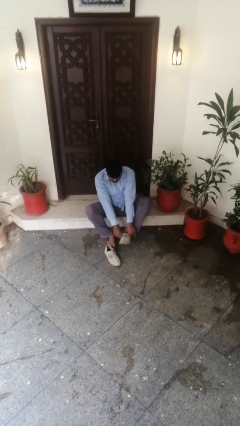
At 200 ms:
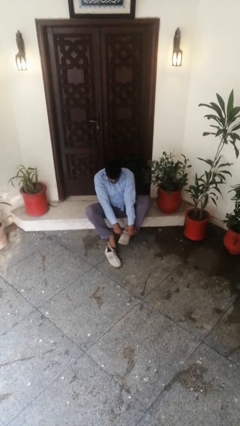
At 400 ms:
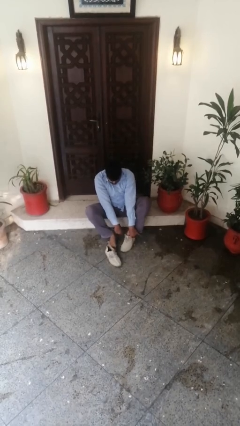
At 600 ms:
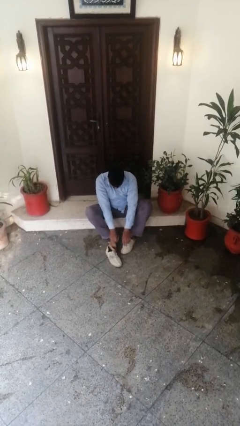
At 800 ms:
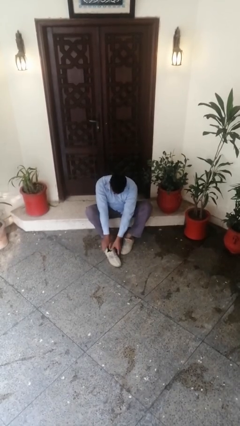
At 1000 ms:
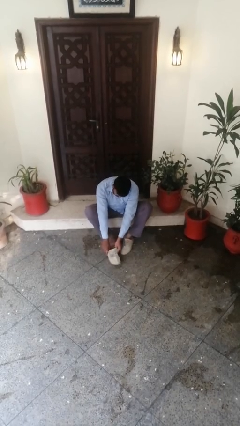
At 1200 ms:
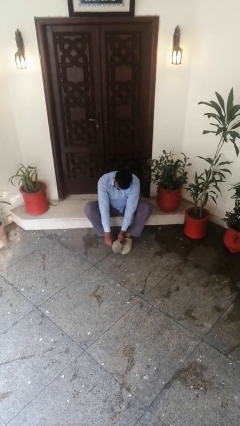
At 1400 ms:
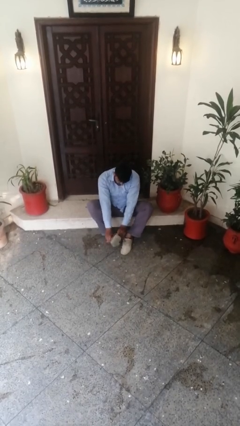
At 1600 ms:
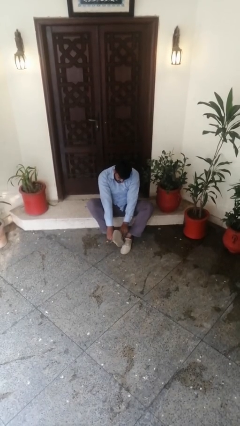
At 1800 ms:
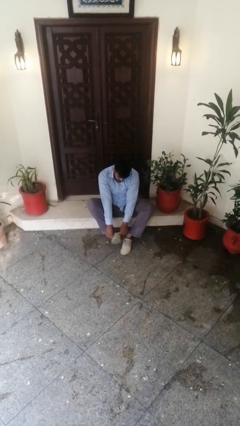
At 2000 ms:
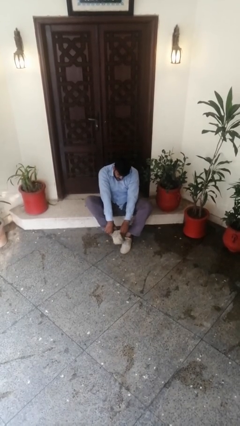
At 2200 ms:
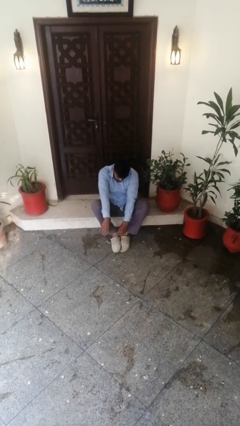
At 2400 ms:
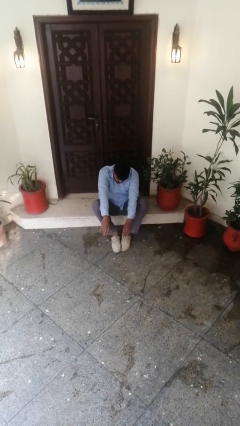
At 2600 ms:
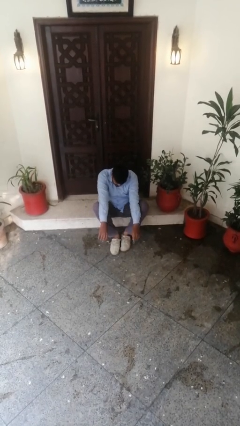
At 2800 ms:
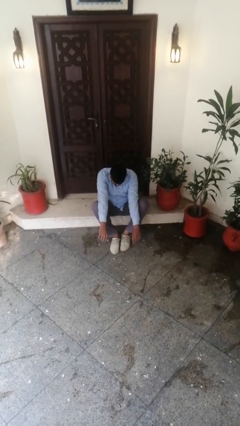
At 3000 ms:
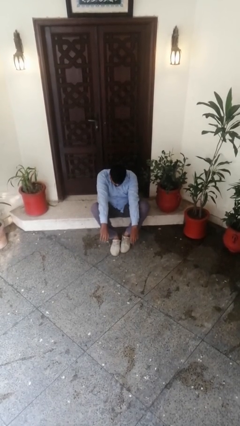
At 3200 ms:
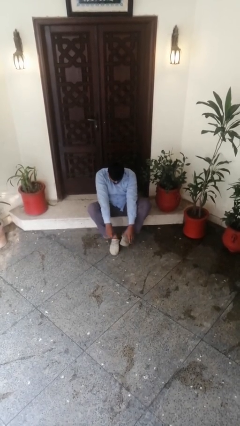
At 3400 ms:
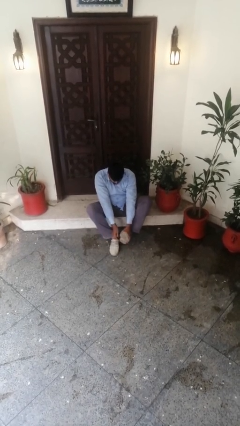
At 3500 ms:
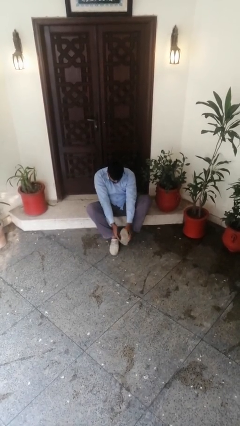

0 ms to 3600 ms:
person puts on shoes

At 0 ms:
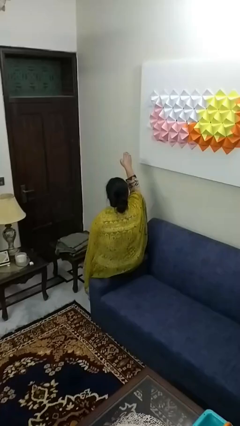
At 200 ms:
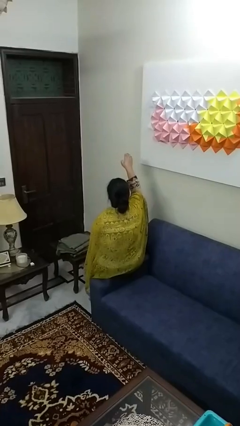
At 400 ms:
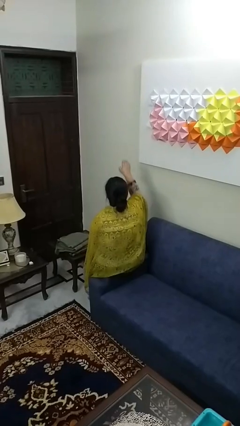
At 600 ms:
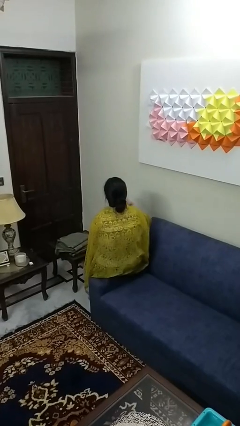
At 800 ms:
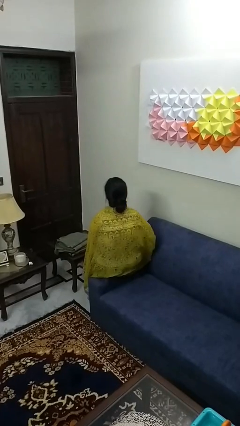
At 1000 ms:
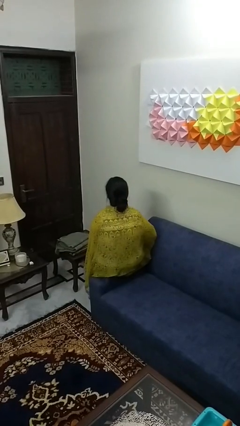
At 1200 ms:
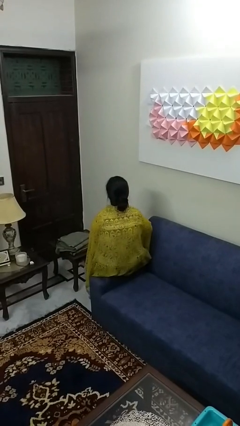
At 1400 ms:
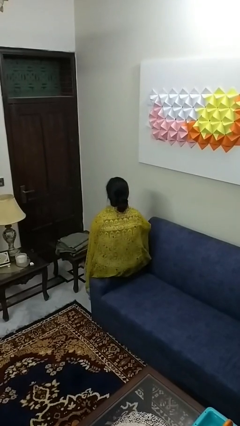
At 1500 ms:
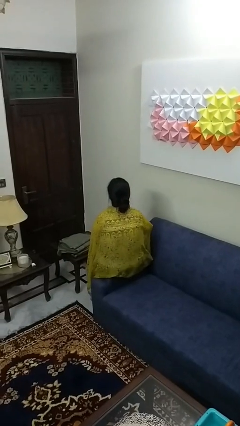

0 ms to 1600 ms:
person gestures swipe down

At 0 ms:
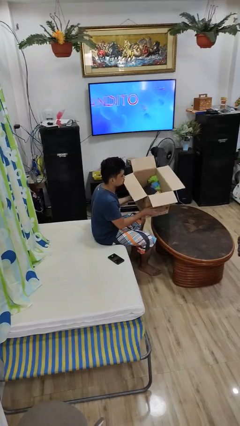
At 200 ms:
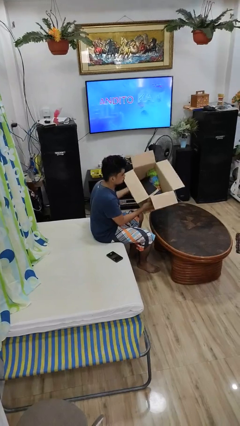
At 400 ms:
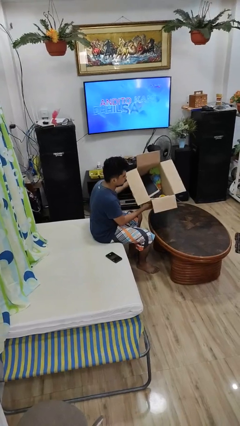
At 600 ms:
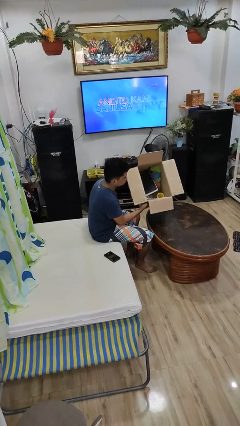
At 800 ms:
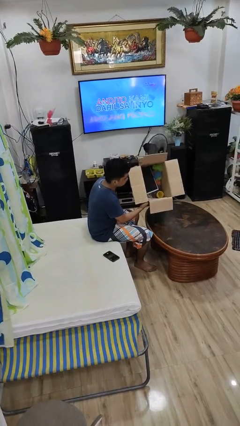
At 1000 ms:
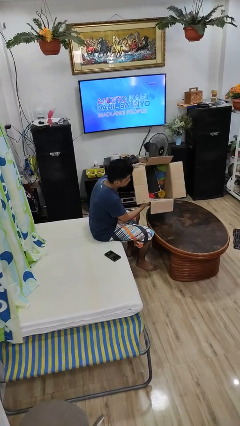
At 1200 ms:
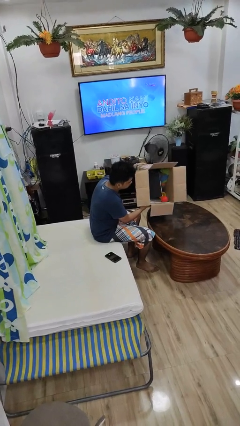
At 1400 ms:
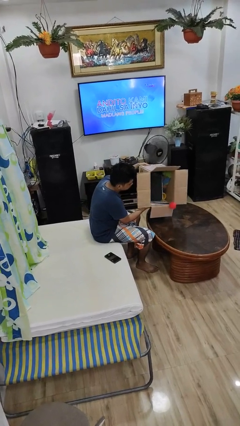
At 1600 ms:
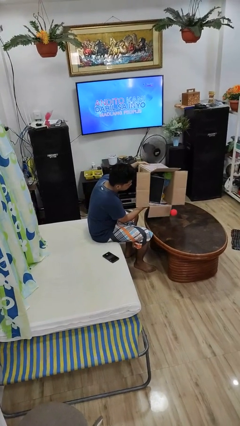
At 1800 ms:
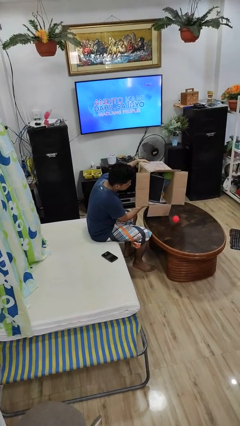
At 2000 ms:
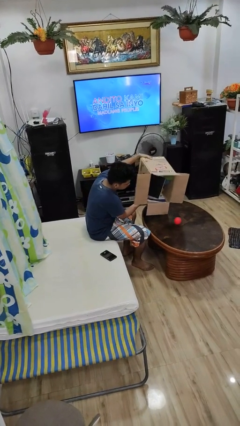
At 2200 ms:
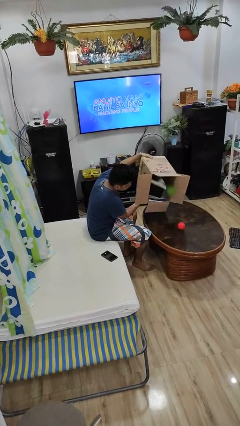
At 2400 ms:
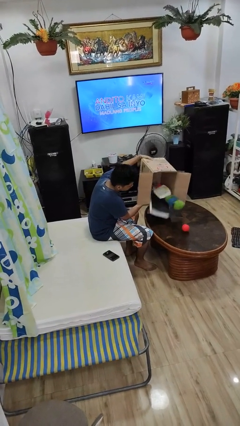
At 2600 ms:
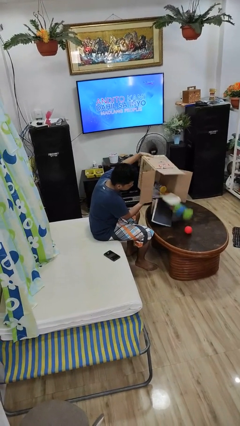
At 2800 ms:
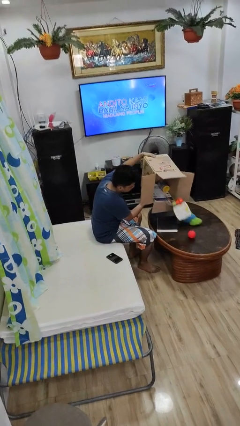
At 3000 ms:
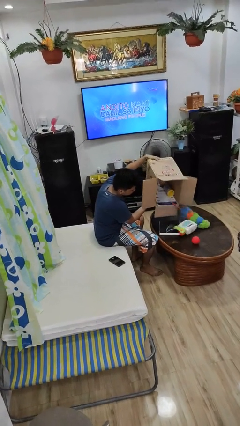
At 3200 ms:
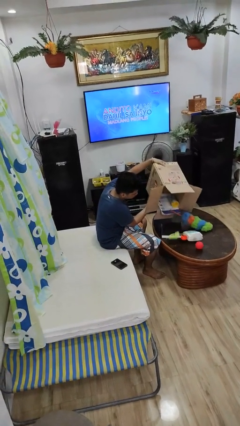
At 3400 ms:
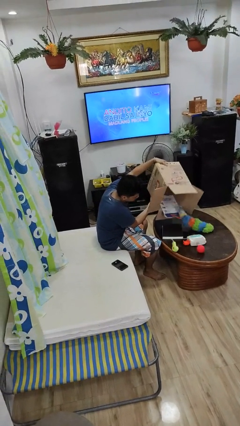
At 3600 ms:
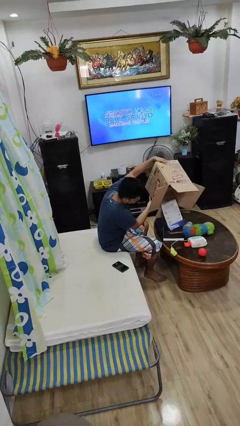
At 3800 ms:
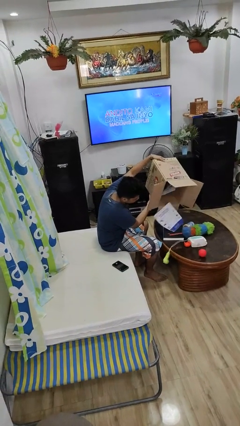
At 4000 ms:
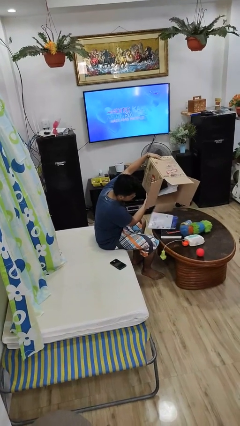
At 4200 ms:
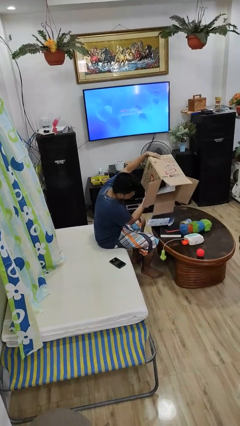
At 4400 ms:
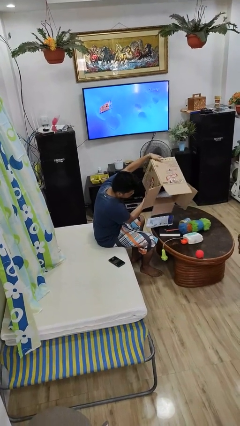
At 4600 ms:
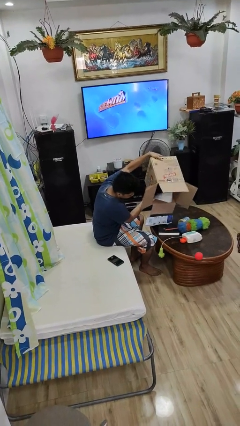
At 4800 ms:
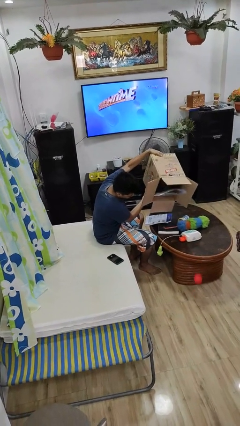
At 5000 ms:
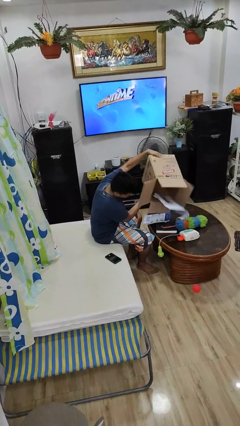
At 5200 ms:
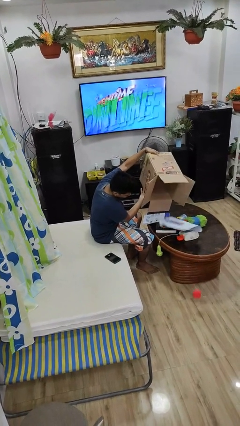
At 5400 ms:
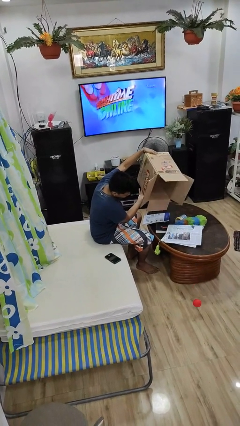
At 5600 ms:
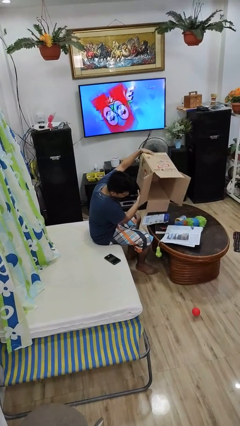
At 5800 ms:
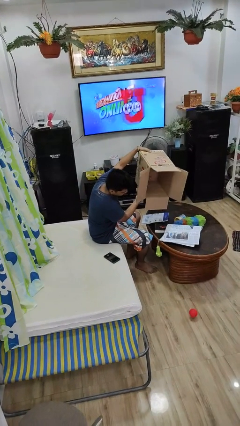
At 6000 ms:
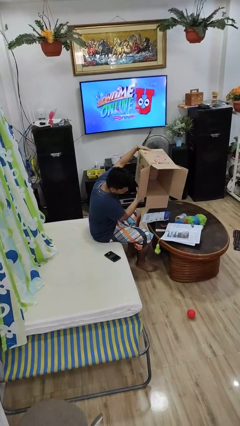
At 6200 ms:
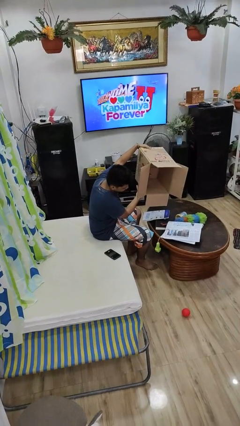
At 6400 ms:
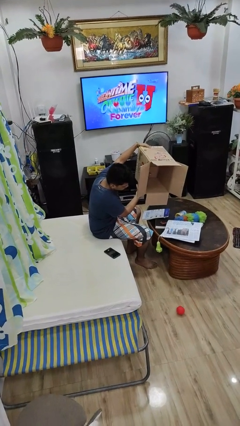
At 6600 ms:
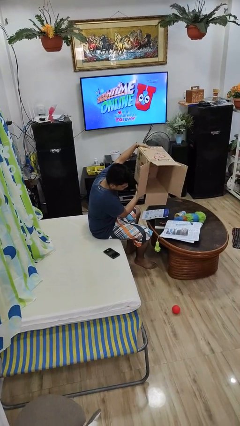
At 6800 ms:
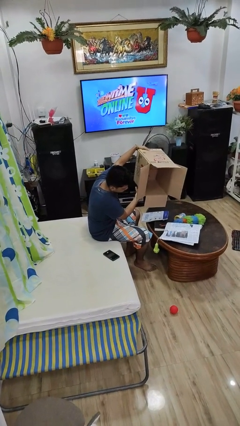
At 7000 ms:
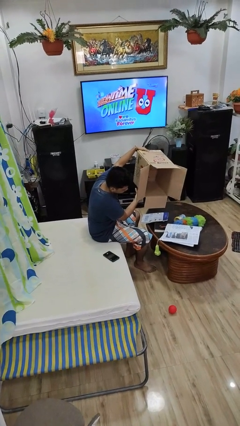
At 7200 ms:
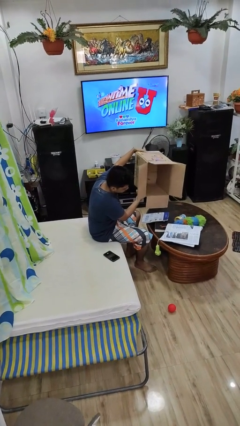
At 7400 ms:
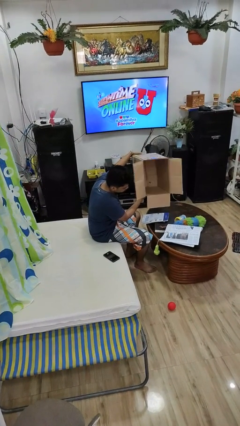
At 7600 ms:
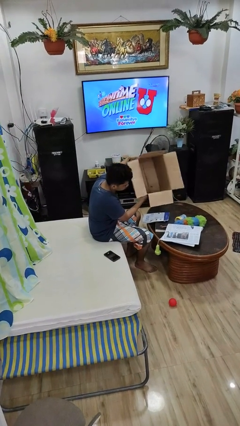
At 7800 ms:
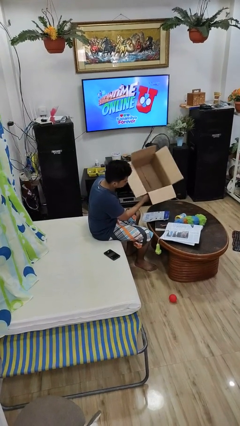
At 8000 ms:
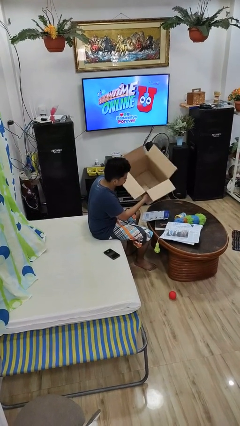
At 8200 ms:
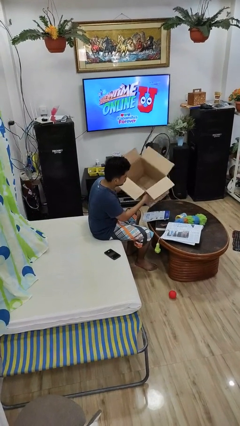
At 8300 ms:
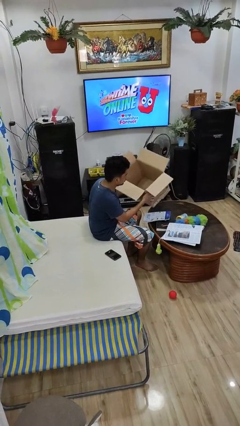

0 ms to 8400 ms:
person unloads box onto floor

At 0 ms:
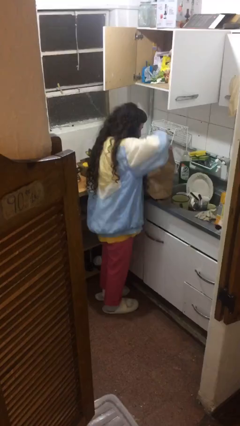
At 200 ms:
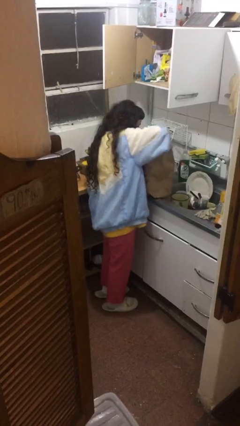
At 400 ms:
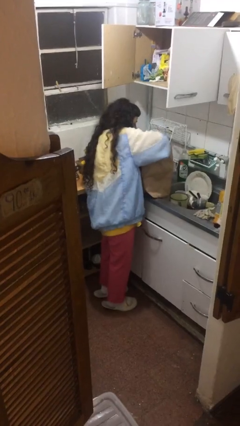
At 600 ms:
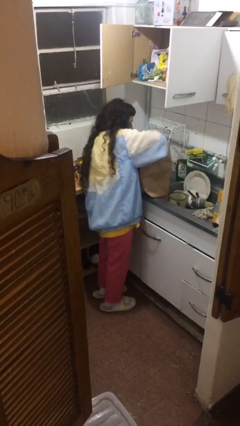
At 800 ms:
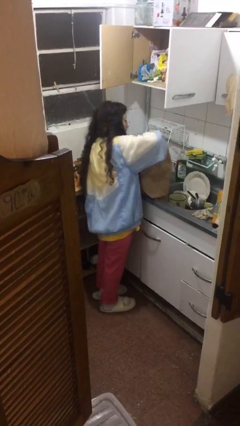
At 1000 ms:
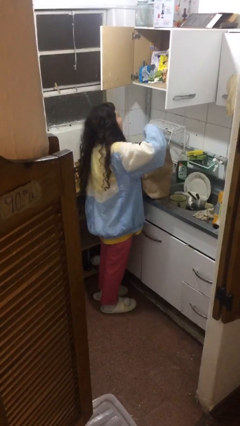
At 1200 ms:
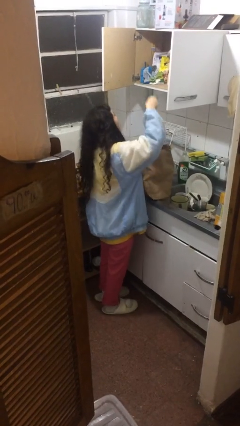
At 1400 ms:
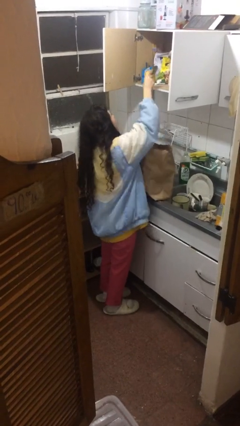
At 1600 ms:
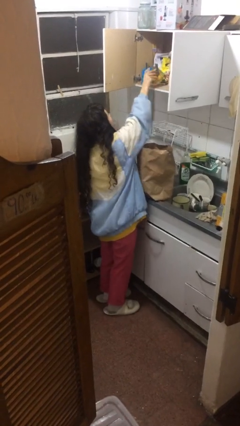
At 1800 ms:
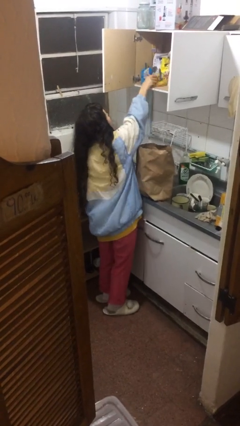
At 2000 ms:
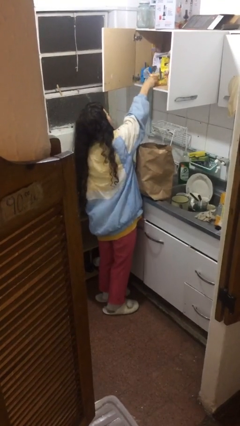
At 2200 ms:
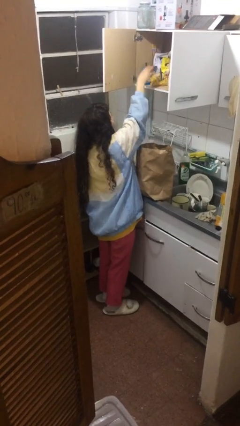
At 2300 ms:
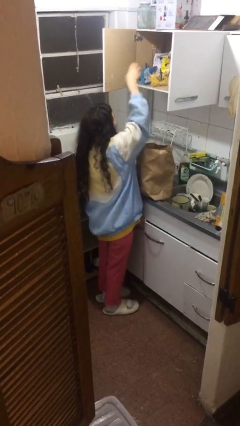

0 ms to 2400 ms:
person loads groceries into cabinet

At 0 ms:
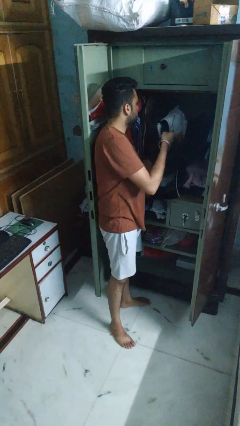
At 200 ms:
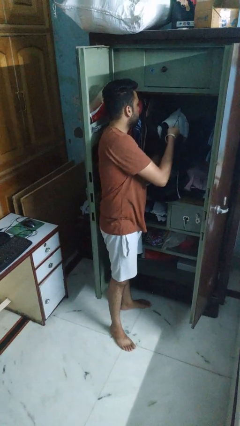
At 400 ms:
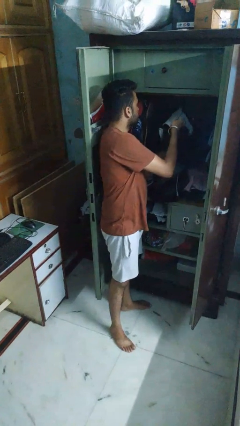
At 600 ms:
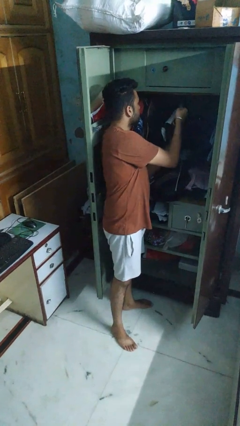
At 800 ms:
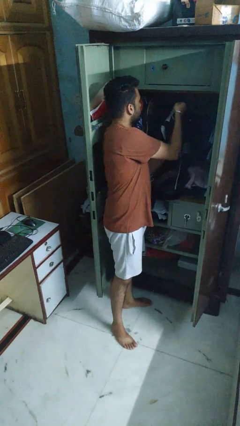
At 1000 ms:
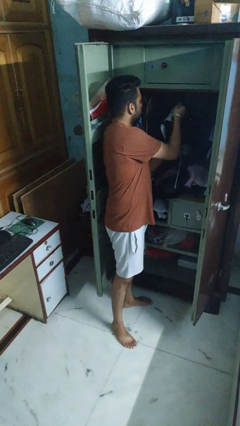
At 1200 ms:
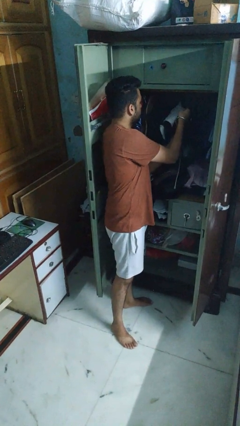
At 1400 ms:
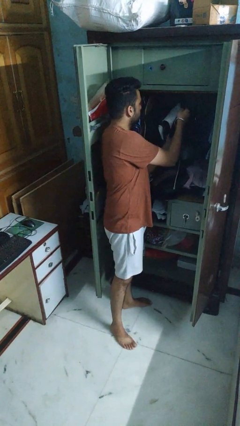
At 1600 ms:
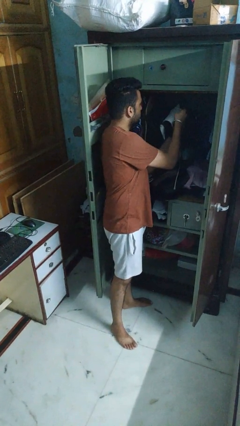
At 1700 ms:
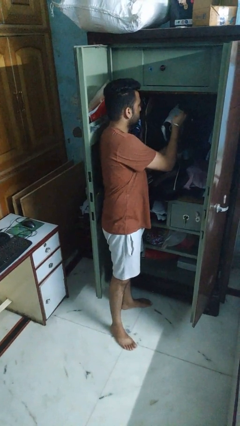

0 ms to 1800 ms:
person puts clothes into closet
